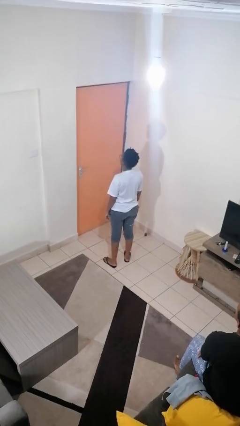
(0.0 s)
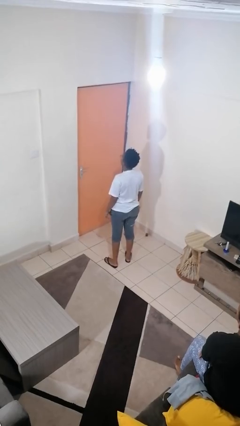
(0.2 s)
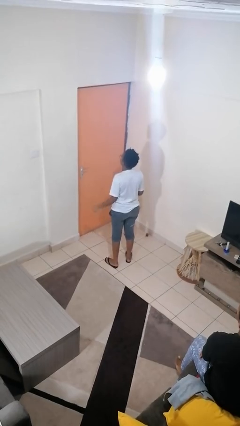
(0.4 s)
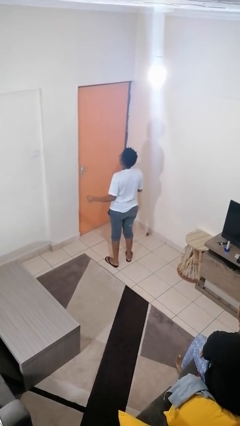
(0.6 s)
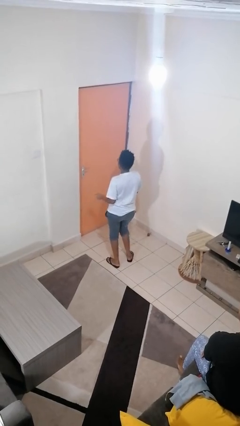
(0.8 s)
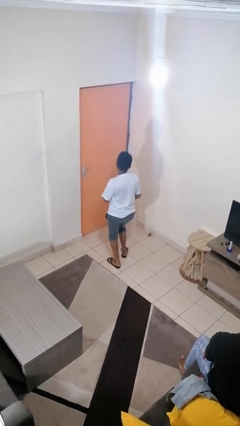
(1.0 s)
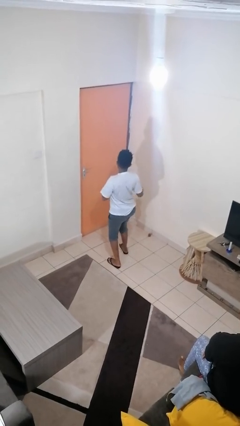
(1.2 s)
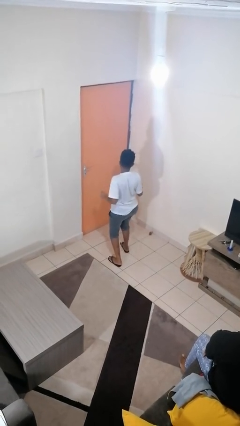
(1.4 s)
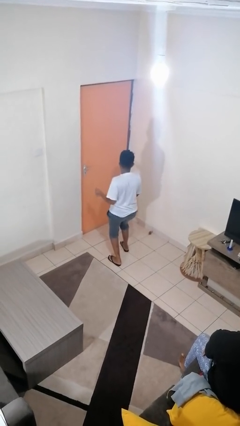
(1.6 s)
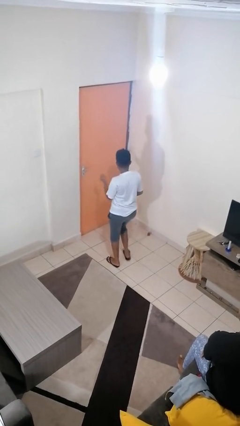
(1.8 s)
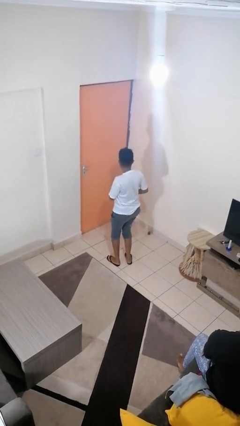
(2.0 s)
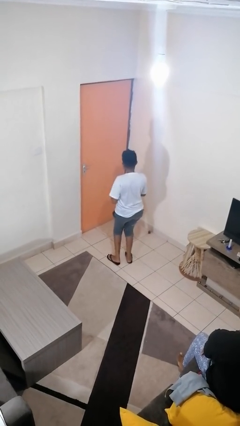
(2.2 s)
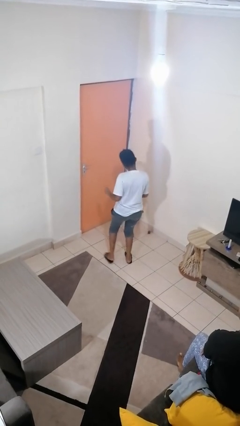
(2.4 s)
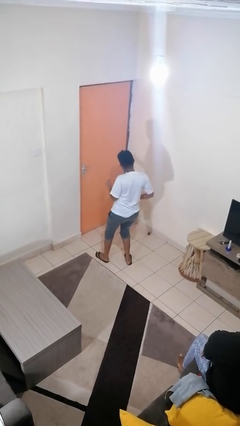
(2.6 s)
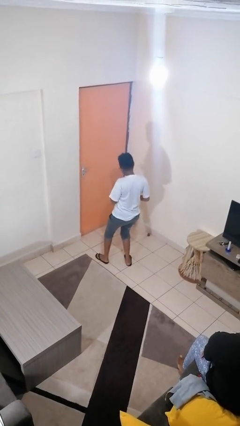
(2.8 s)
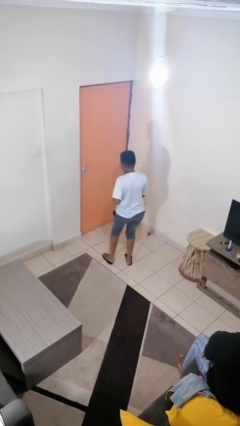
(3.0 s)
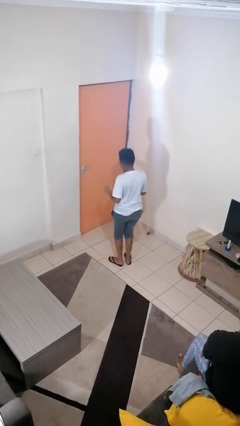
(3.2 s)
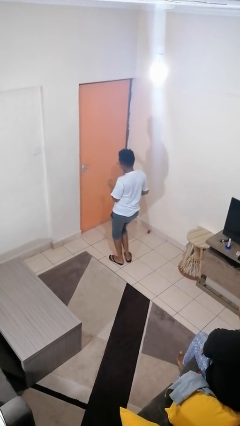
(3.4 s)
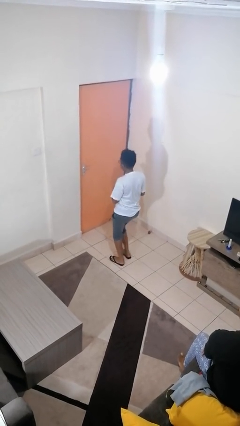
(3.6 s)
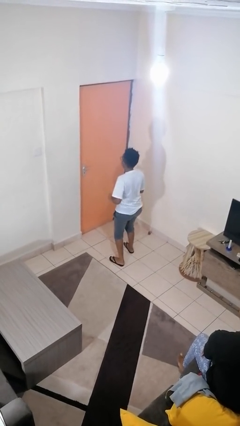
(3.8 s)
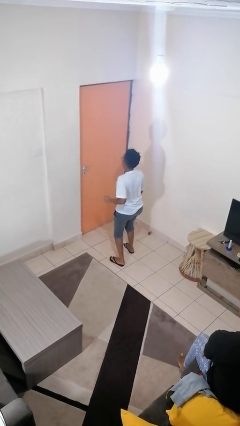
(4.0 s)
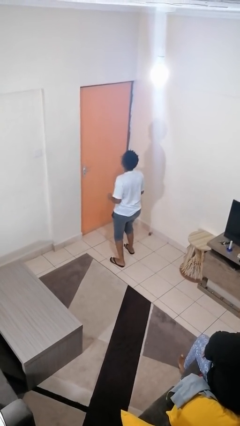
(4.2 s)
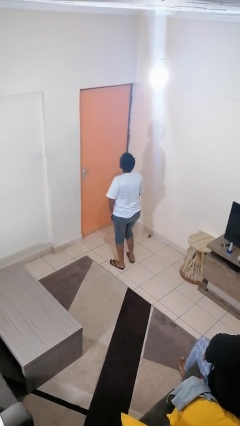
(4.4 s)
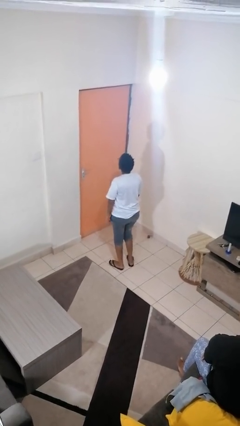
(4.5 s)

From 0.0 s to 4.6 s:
person dances in place

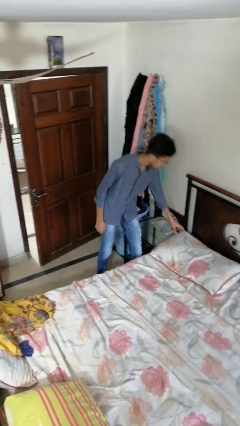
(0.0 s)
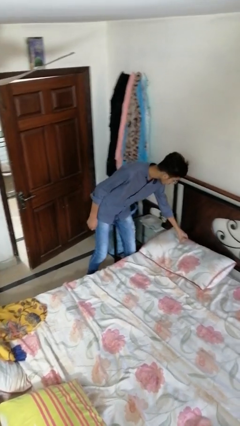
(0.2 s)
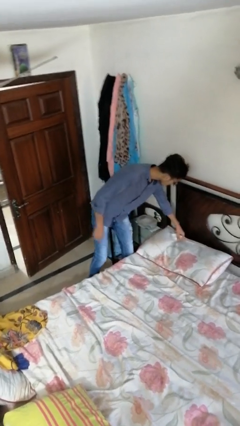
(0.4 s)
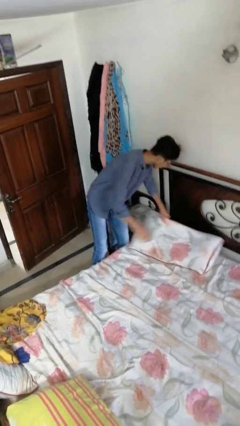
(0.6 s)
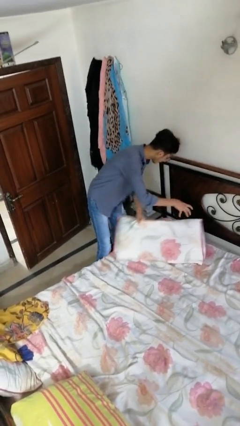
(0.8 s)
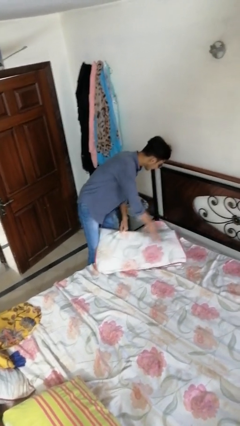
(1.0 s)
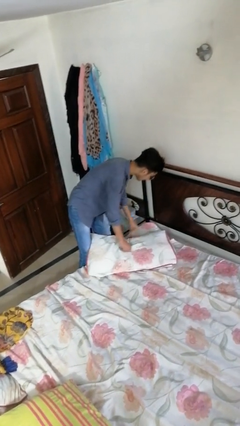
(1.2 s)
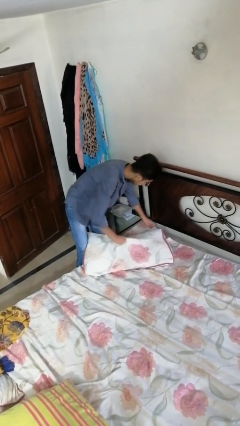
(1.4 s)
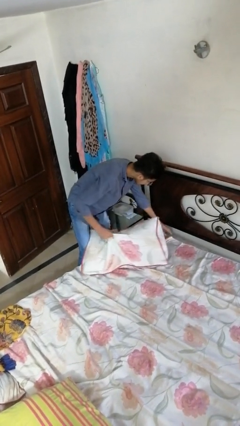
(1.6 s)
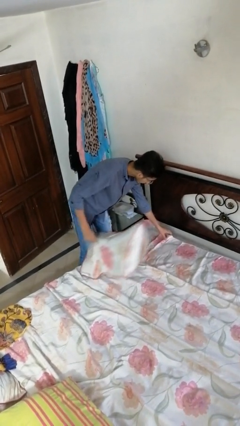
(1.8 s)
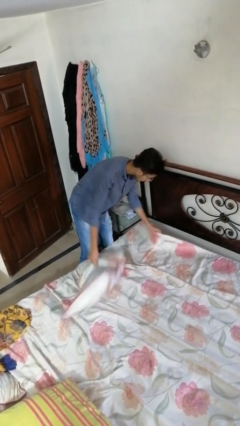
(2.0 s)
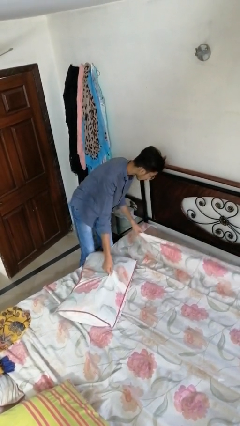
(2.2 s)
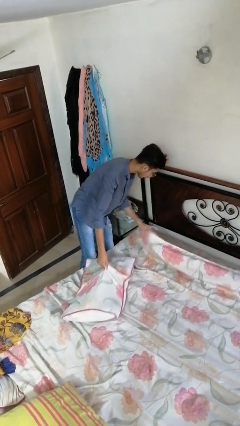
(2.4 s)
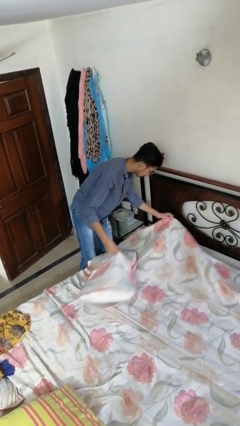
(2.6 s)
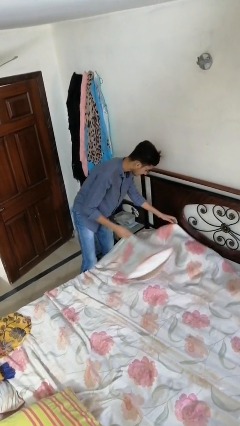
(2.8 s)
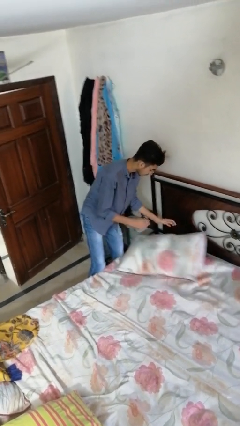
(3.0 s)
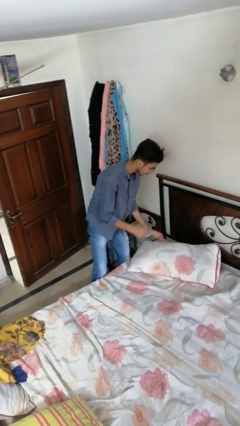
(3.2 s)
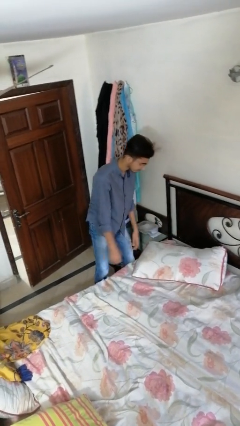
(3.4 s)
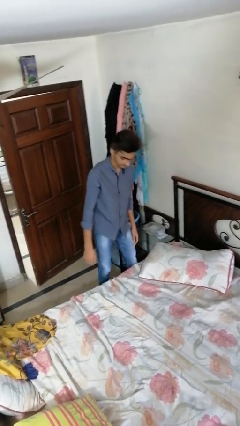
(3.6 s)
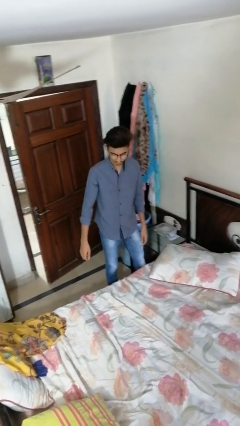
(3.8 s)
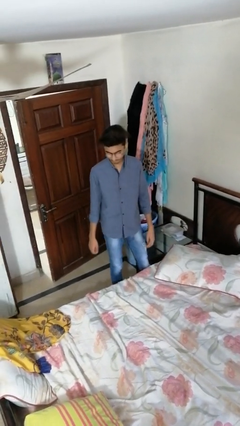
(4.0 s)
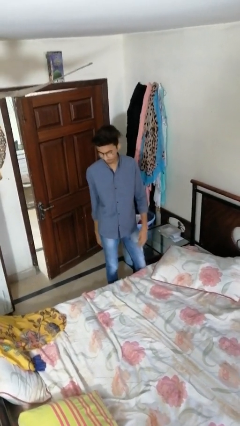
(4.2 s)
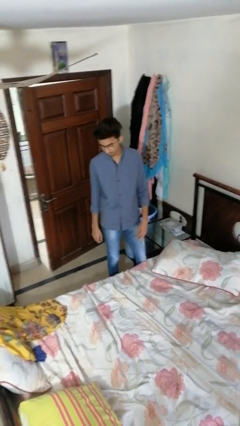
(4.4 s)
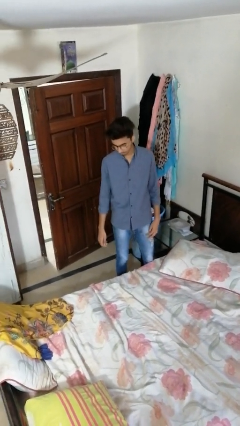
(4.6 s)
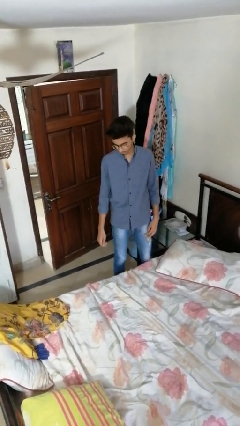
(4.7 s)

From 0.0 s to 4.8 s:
person searches under bed

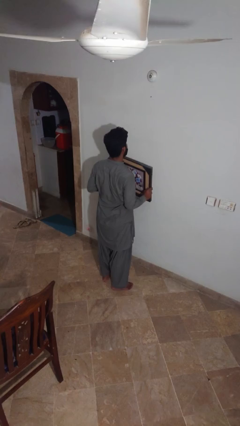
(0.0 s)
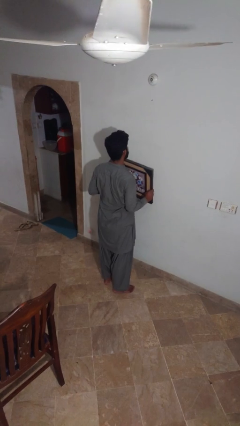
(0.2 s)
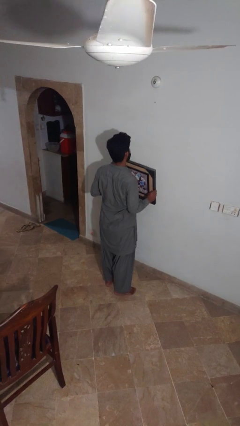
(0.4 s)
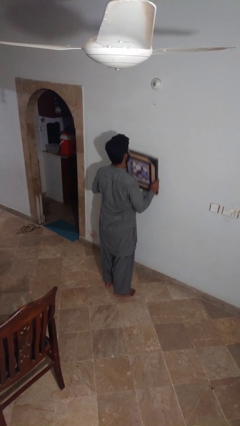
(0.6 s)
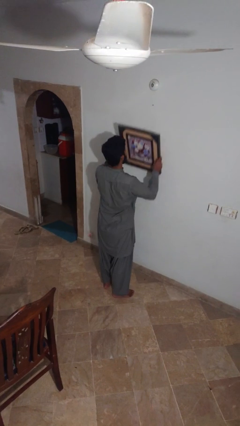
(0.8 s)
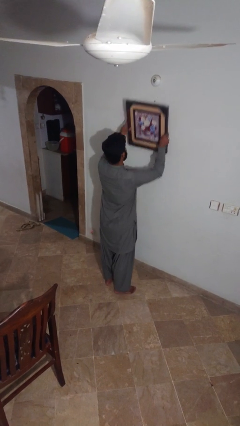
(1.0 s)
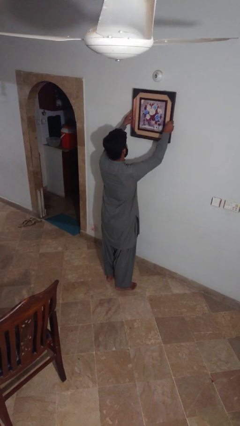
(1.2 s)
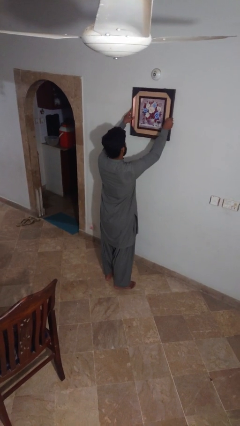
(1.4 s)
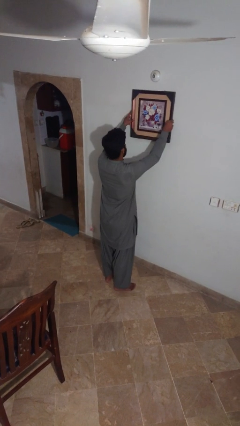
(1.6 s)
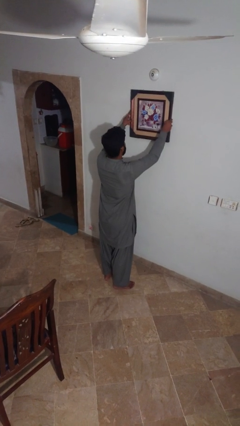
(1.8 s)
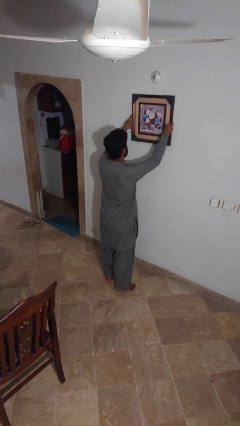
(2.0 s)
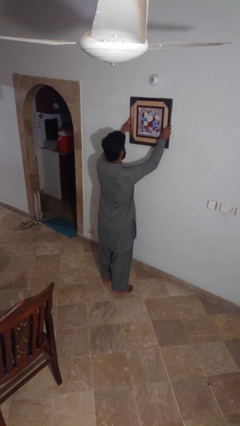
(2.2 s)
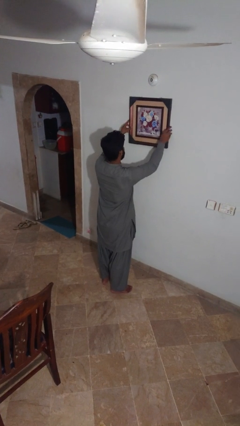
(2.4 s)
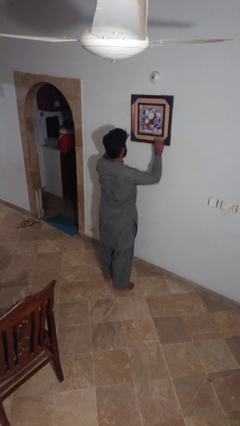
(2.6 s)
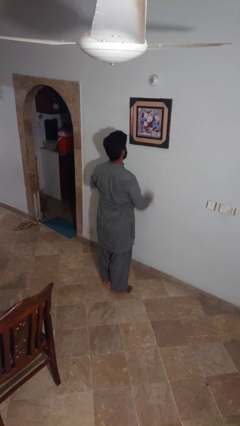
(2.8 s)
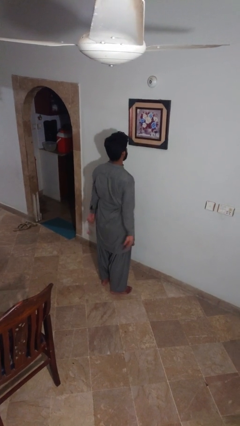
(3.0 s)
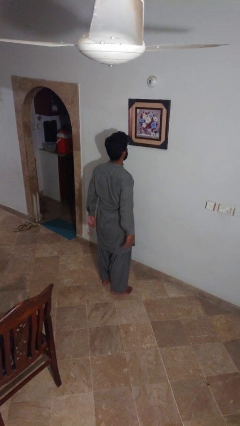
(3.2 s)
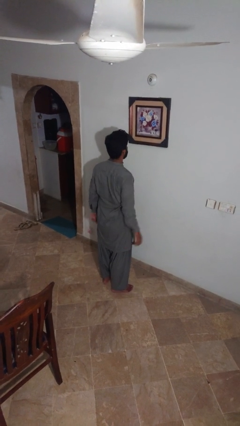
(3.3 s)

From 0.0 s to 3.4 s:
person puts up picture frame

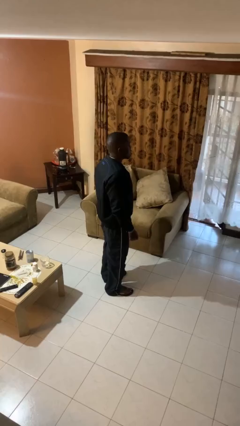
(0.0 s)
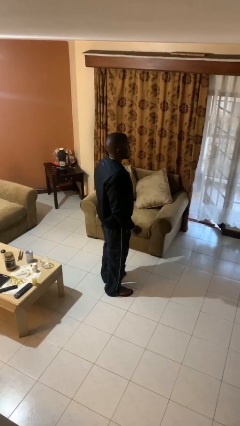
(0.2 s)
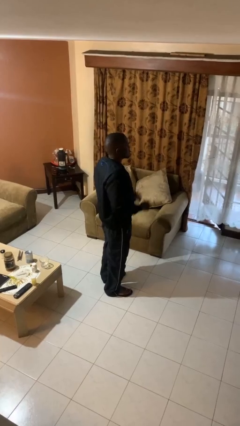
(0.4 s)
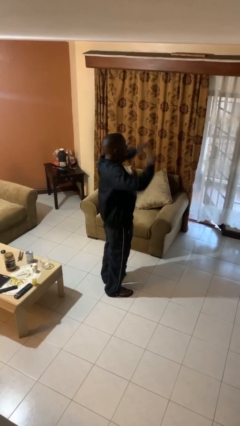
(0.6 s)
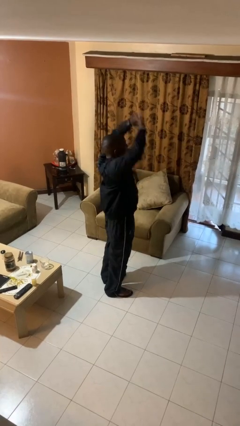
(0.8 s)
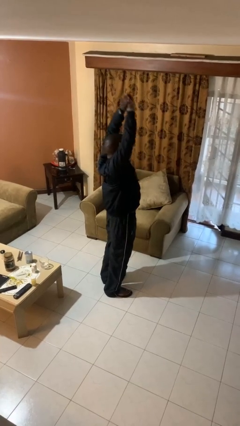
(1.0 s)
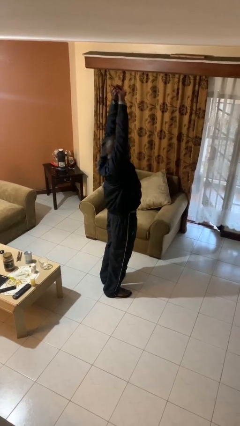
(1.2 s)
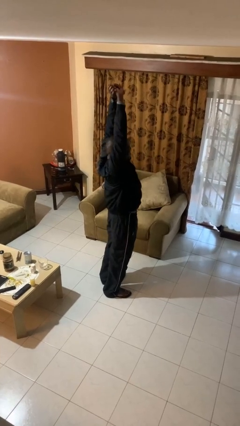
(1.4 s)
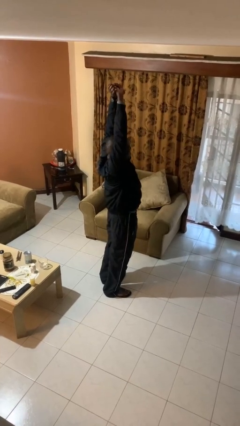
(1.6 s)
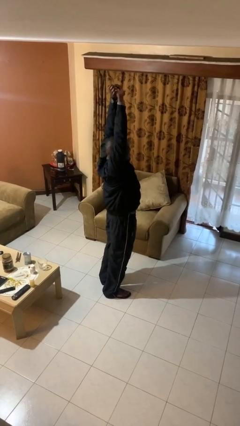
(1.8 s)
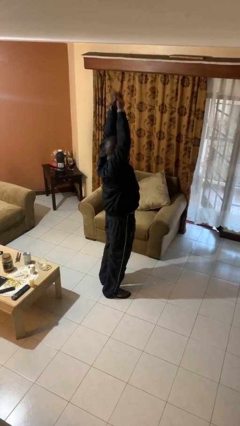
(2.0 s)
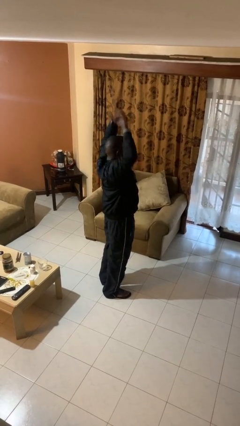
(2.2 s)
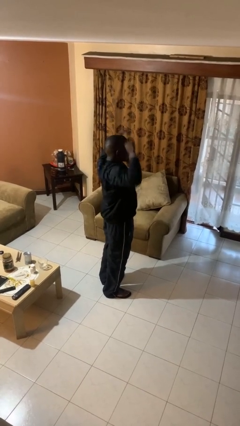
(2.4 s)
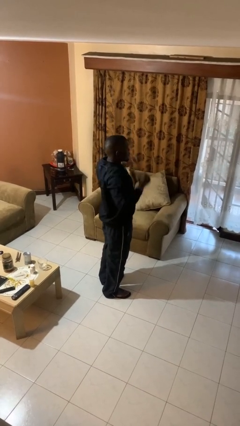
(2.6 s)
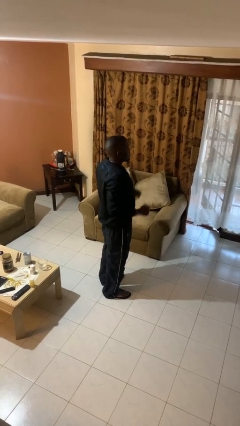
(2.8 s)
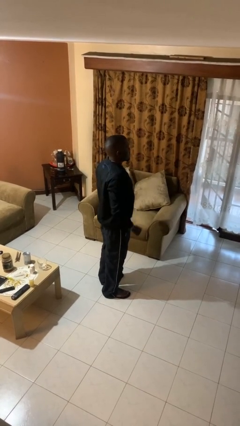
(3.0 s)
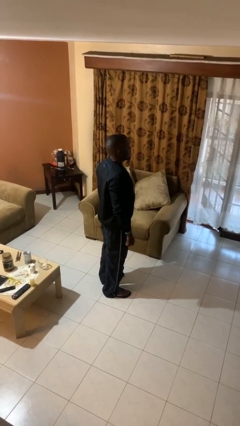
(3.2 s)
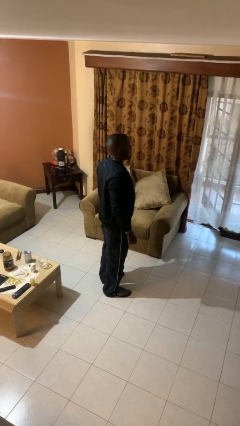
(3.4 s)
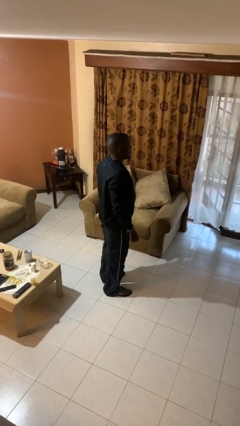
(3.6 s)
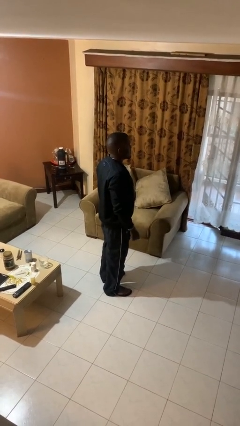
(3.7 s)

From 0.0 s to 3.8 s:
person stretches arms over head

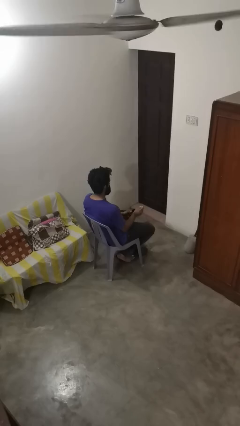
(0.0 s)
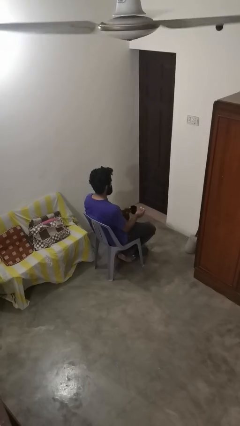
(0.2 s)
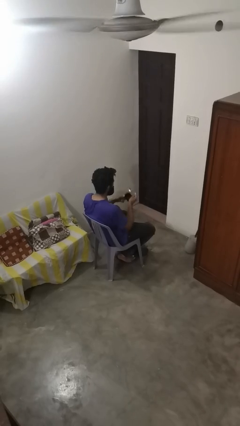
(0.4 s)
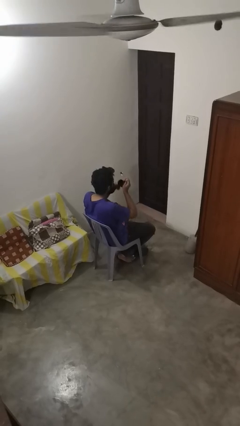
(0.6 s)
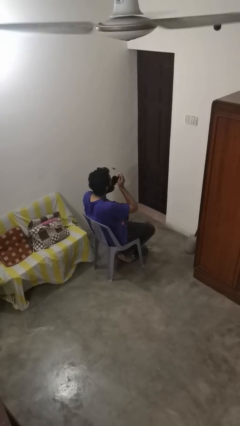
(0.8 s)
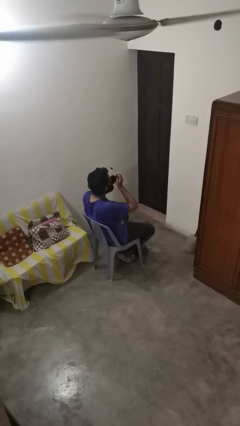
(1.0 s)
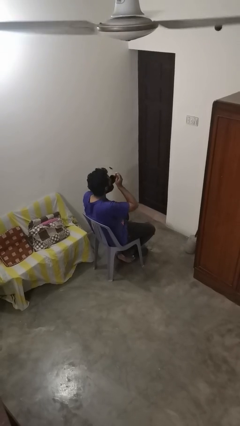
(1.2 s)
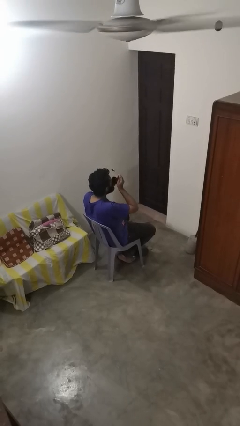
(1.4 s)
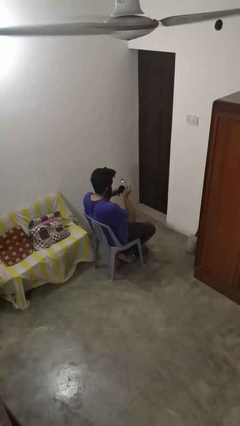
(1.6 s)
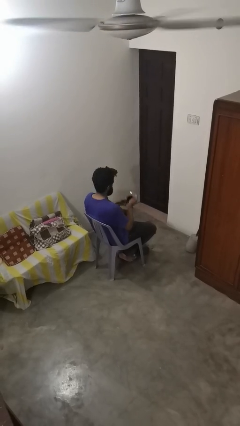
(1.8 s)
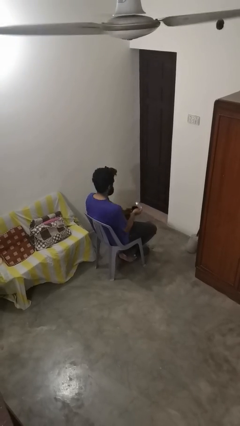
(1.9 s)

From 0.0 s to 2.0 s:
person drinks from mug
